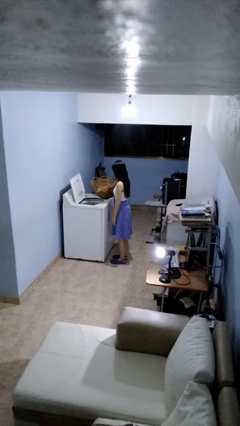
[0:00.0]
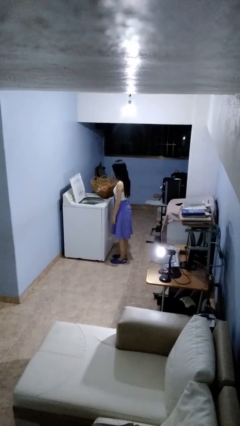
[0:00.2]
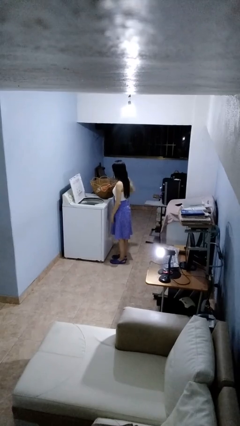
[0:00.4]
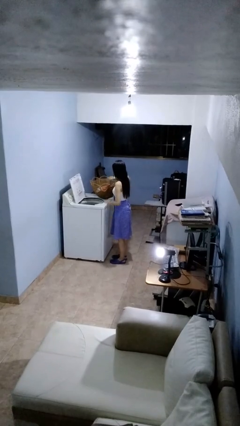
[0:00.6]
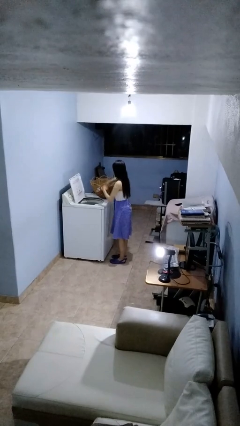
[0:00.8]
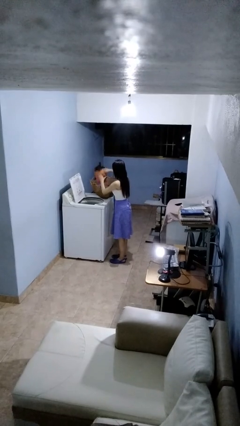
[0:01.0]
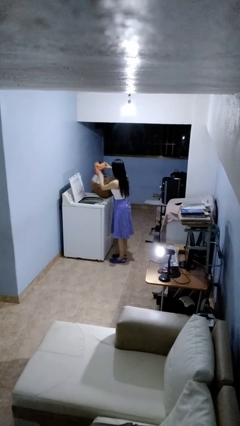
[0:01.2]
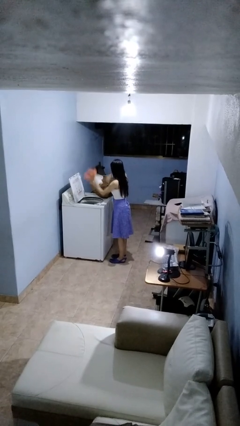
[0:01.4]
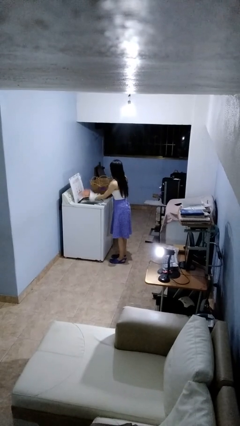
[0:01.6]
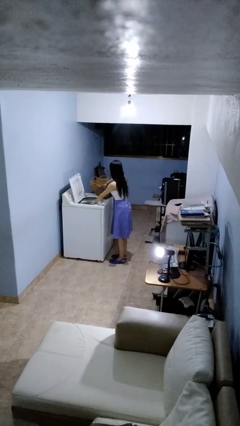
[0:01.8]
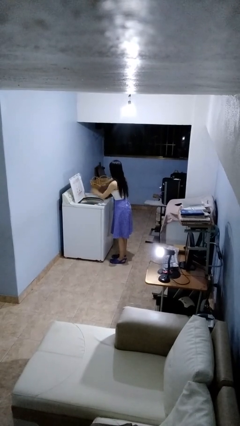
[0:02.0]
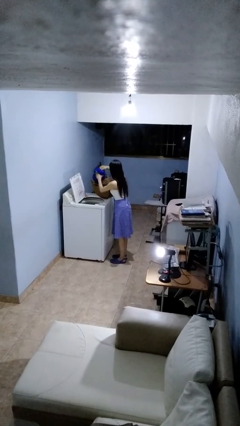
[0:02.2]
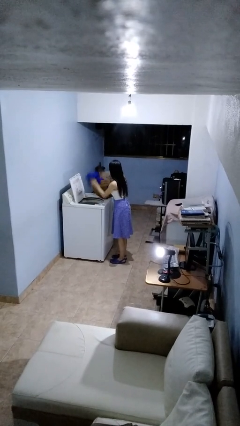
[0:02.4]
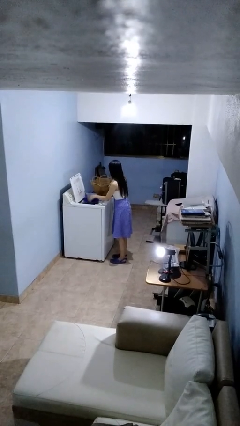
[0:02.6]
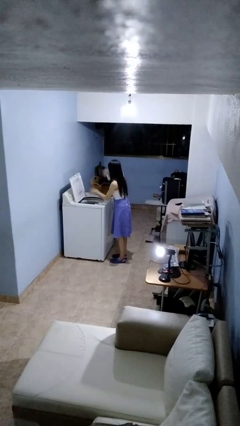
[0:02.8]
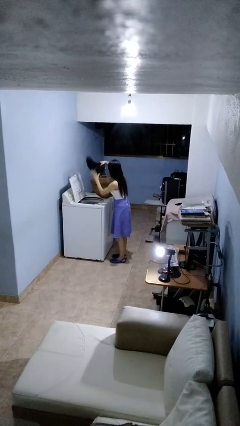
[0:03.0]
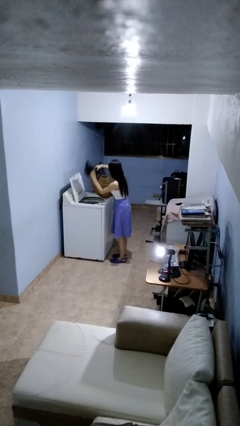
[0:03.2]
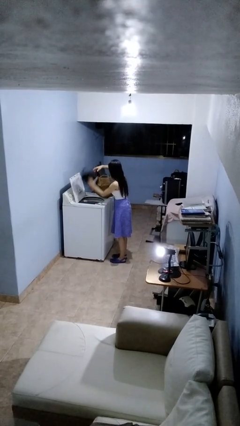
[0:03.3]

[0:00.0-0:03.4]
person loads clotheswasher

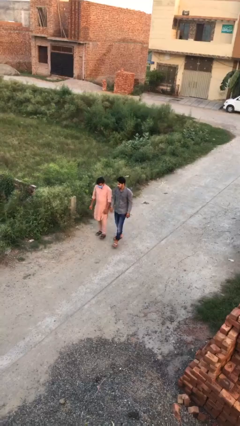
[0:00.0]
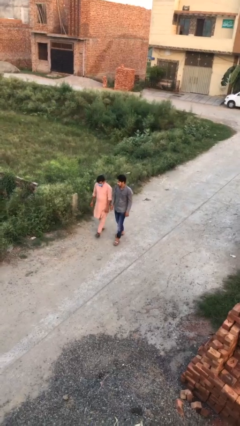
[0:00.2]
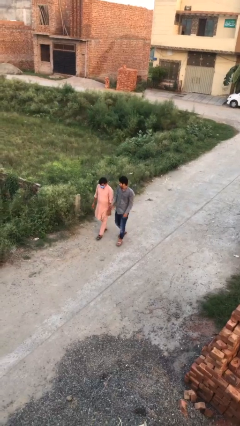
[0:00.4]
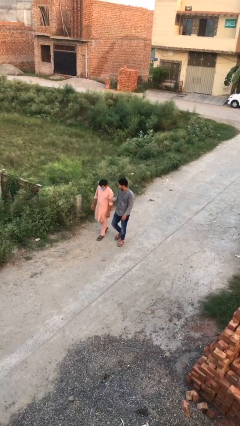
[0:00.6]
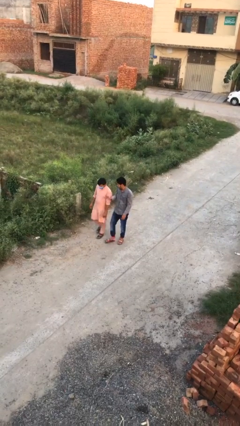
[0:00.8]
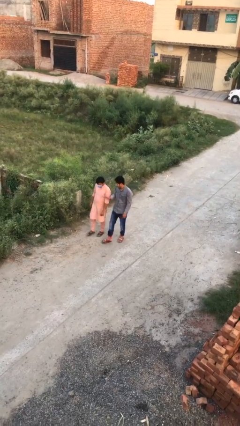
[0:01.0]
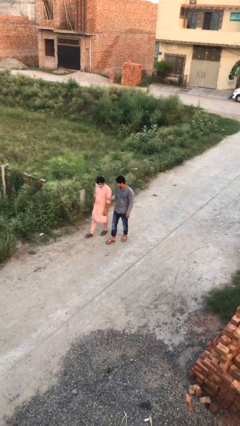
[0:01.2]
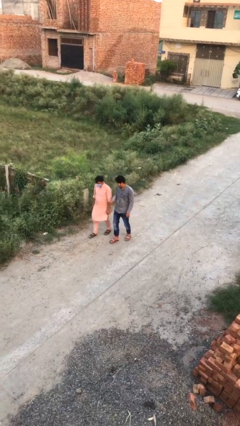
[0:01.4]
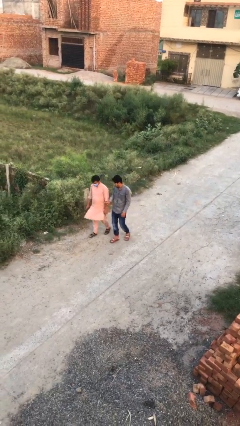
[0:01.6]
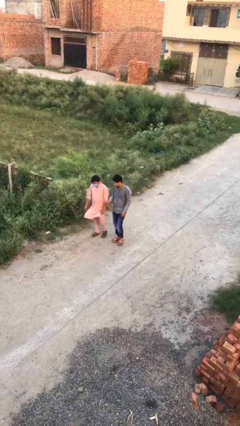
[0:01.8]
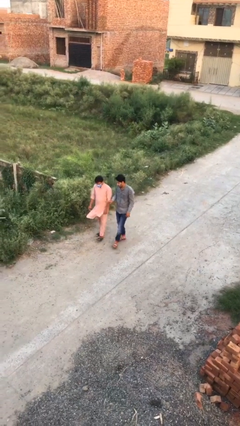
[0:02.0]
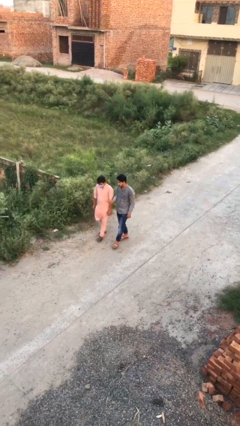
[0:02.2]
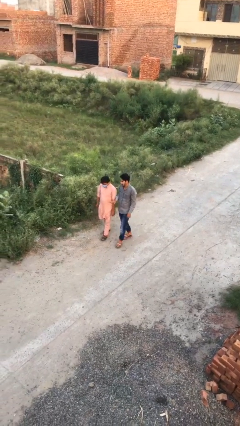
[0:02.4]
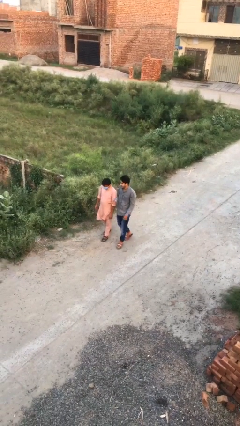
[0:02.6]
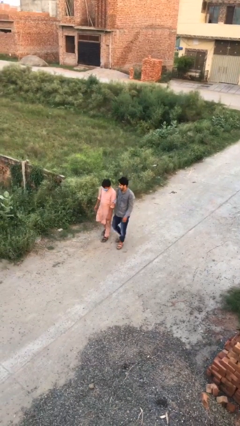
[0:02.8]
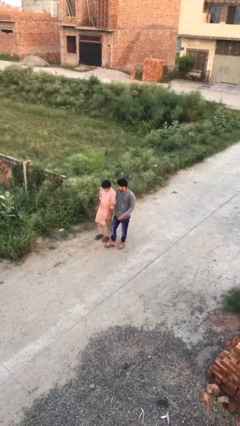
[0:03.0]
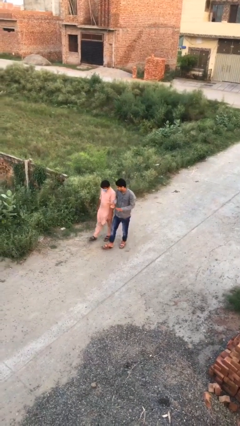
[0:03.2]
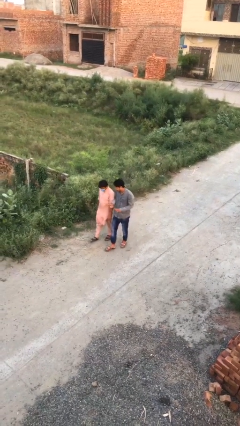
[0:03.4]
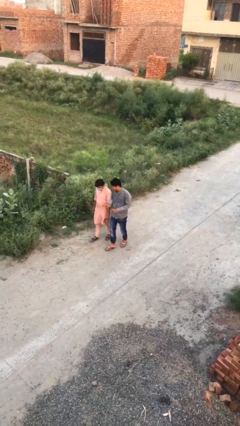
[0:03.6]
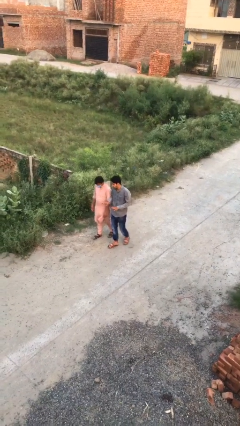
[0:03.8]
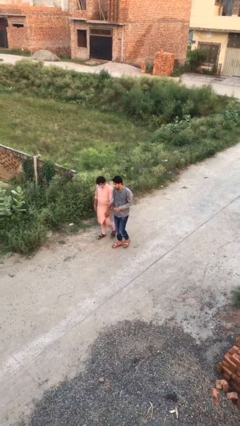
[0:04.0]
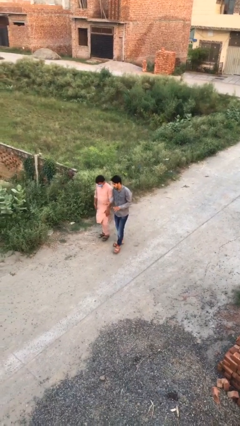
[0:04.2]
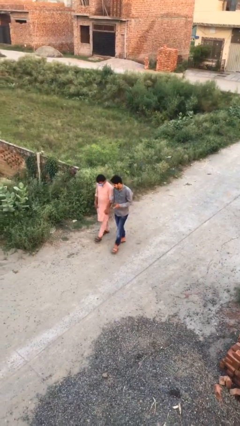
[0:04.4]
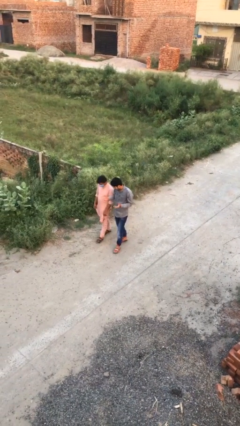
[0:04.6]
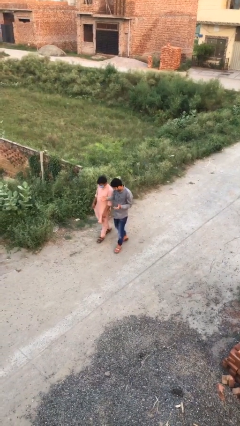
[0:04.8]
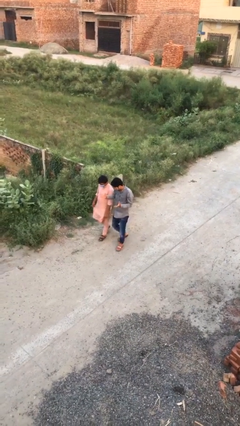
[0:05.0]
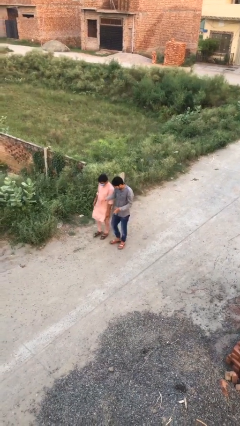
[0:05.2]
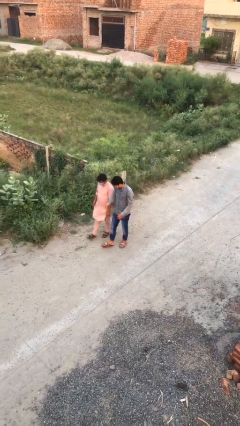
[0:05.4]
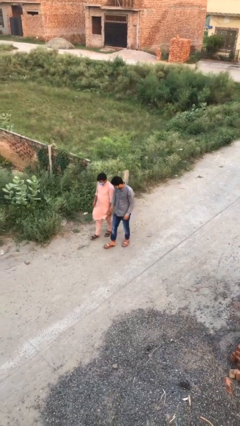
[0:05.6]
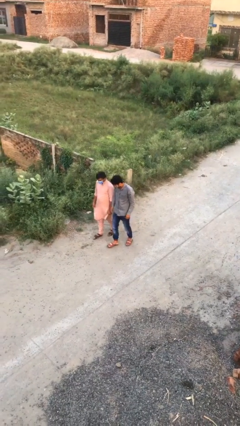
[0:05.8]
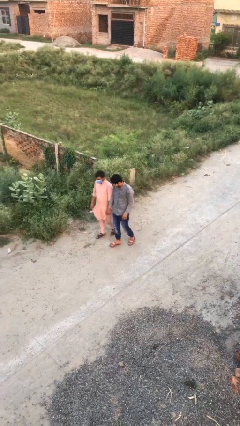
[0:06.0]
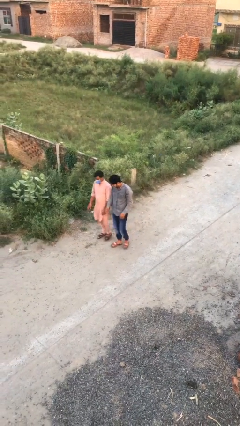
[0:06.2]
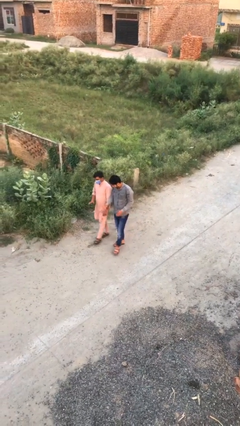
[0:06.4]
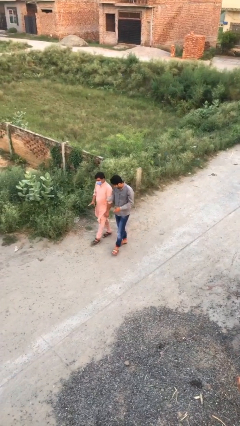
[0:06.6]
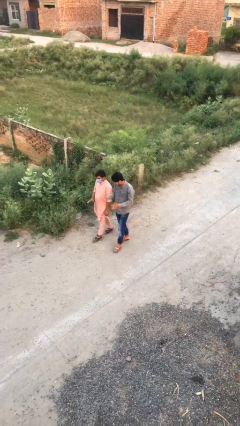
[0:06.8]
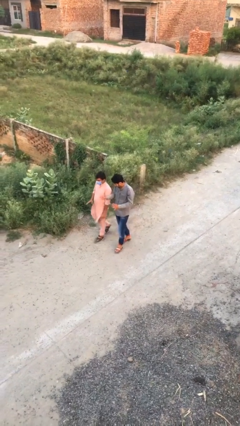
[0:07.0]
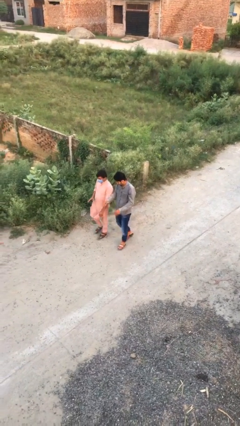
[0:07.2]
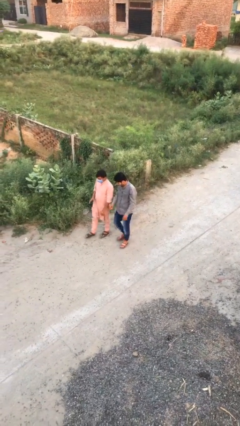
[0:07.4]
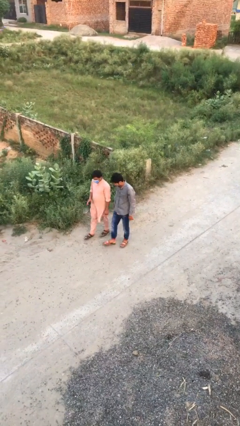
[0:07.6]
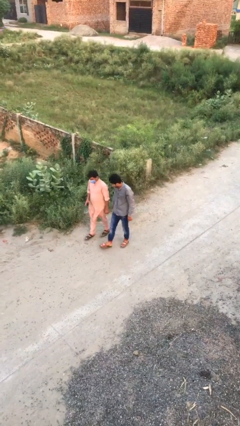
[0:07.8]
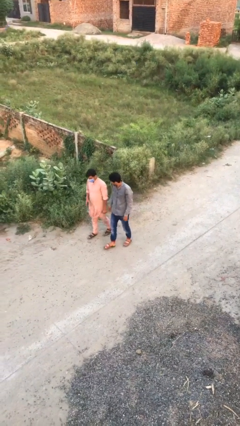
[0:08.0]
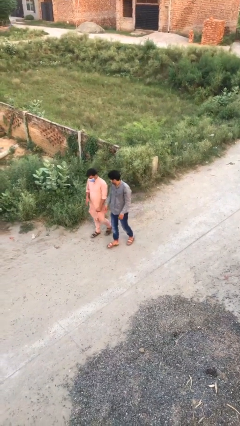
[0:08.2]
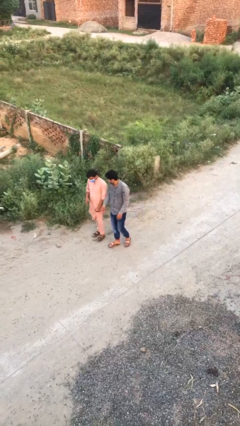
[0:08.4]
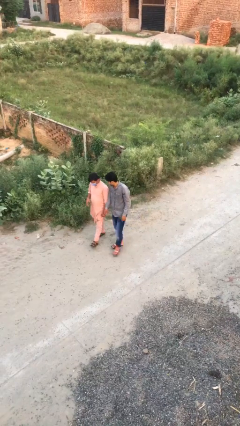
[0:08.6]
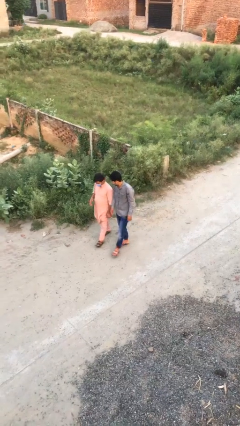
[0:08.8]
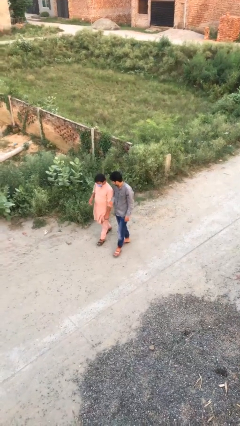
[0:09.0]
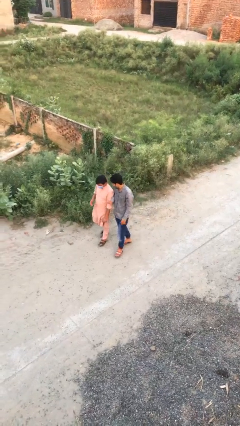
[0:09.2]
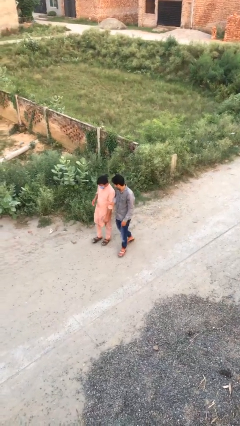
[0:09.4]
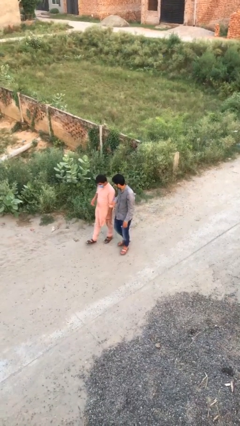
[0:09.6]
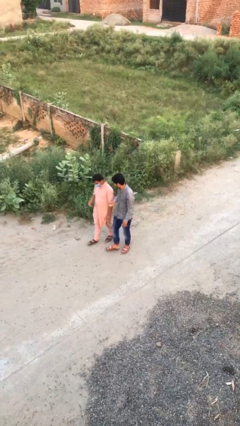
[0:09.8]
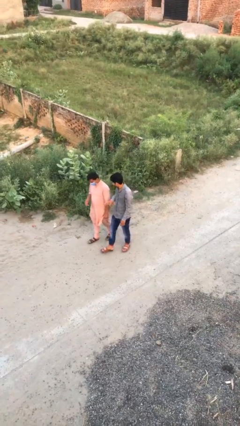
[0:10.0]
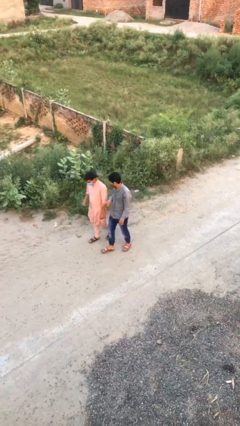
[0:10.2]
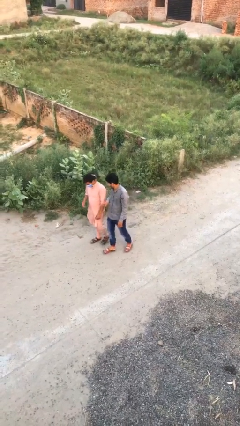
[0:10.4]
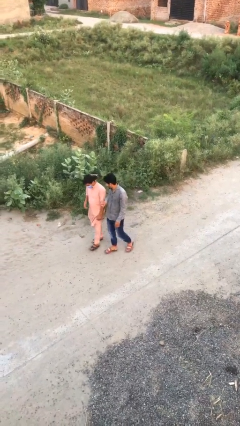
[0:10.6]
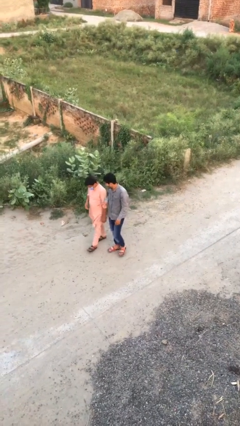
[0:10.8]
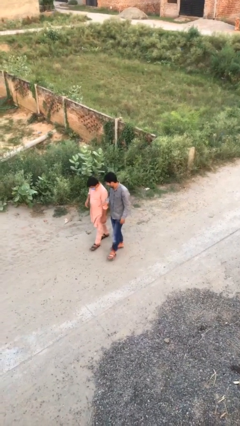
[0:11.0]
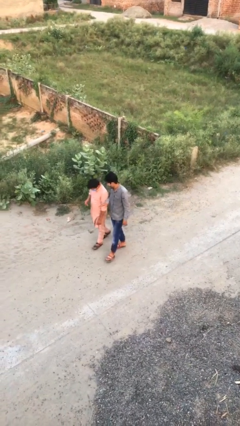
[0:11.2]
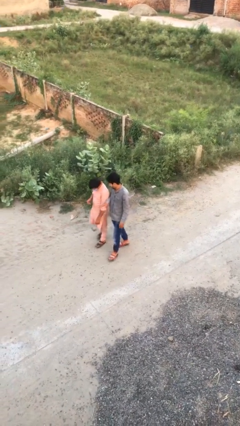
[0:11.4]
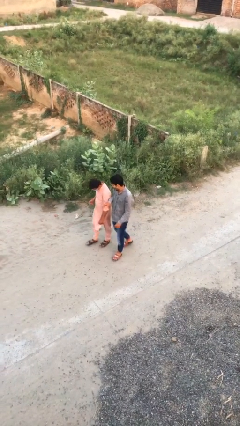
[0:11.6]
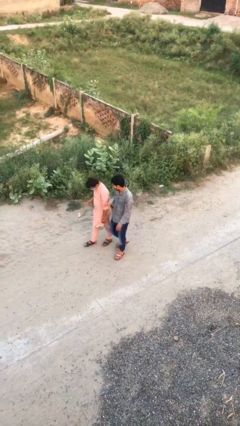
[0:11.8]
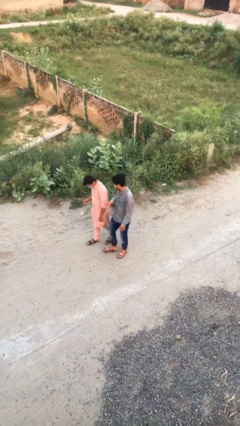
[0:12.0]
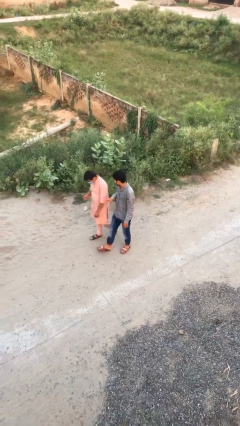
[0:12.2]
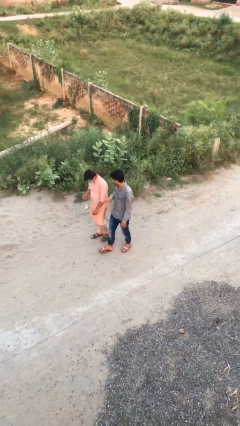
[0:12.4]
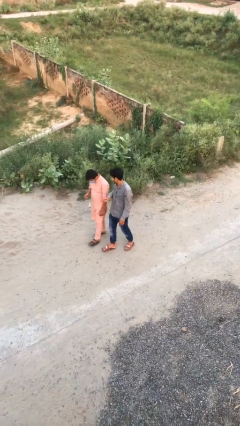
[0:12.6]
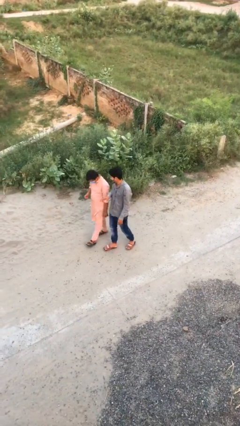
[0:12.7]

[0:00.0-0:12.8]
person talks to person

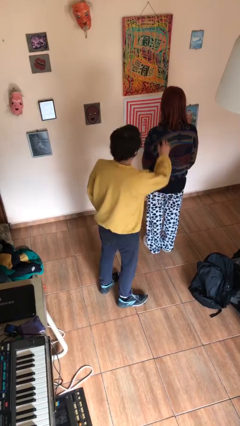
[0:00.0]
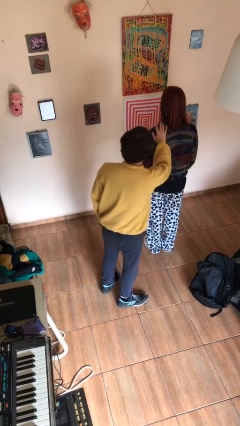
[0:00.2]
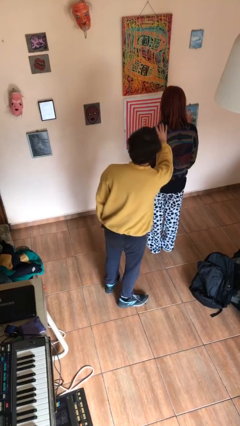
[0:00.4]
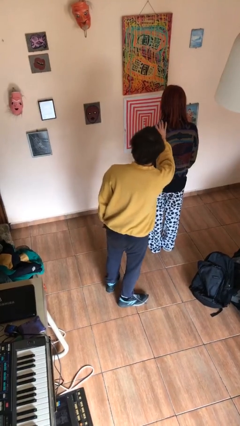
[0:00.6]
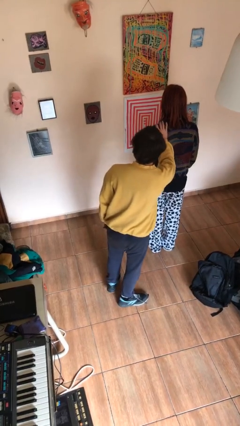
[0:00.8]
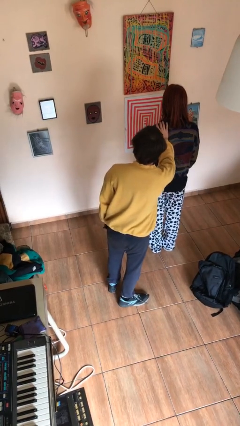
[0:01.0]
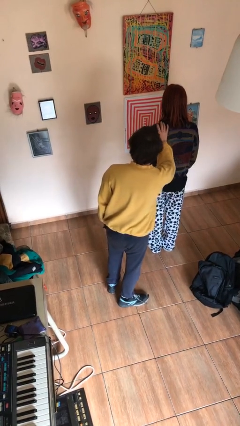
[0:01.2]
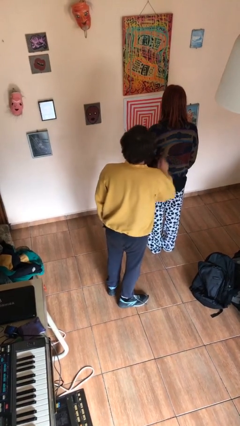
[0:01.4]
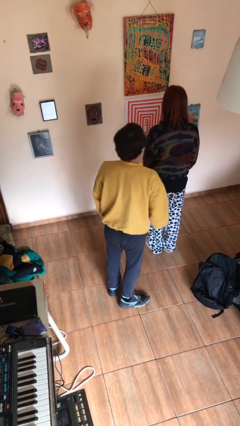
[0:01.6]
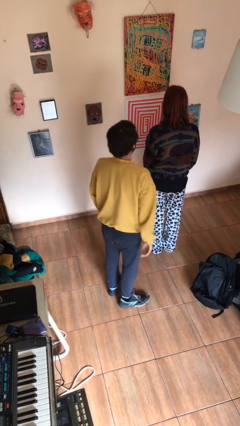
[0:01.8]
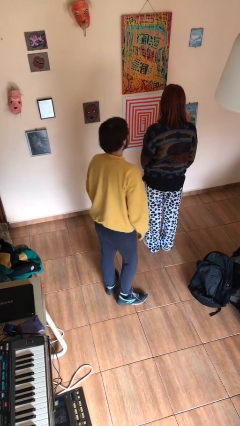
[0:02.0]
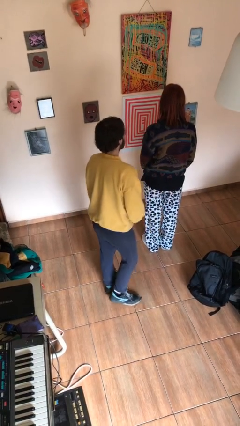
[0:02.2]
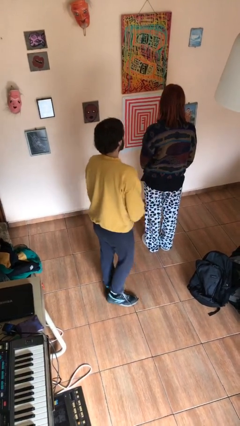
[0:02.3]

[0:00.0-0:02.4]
person touches back of person
